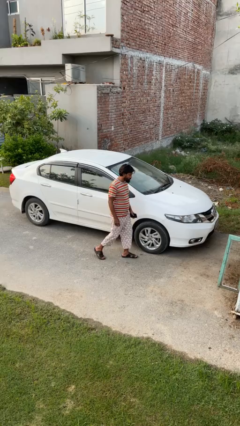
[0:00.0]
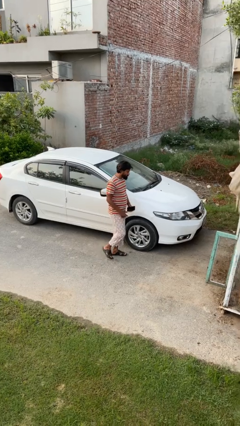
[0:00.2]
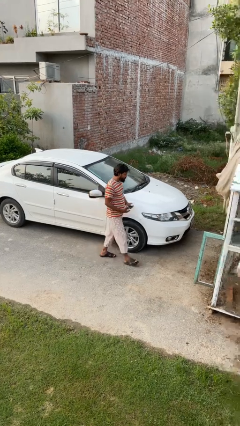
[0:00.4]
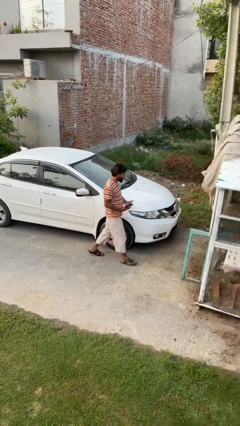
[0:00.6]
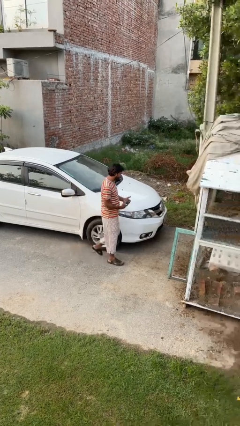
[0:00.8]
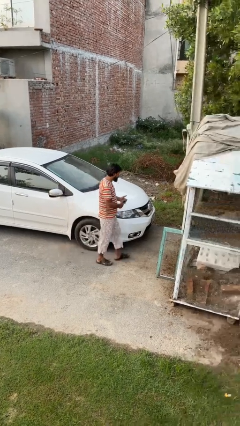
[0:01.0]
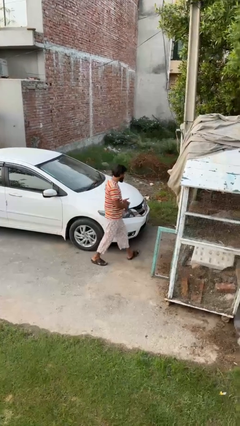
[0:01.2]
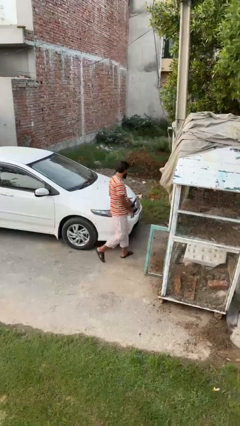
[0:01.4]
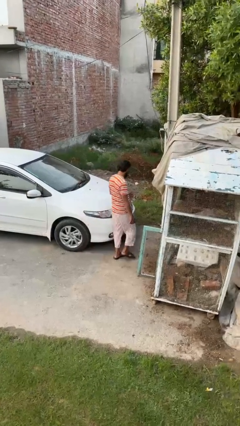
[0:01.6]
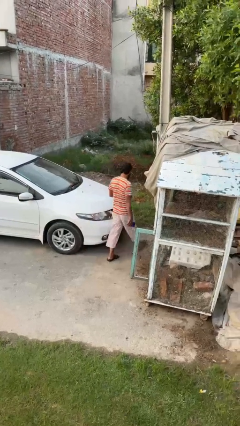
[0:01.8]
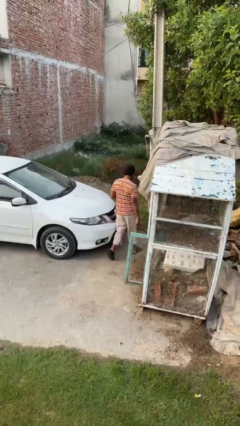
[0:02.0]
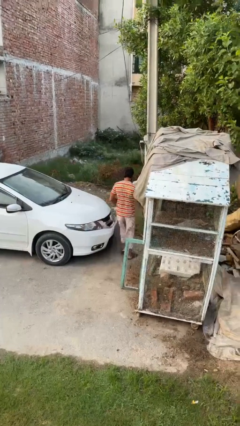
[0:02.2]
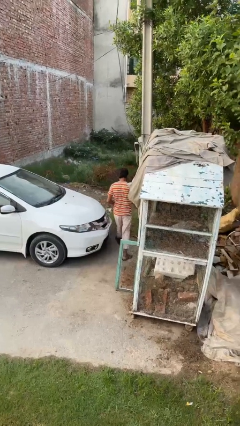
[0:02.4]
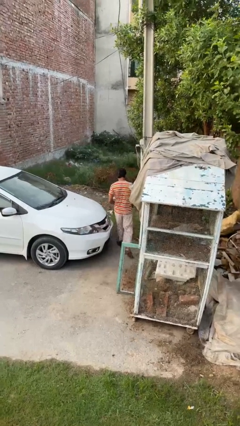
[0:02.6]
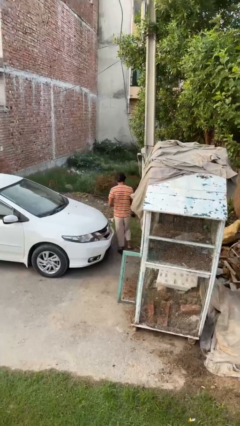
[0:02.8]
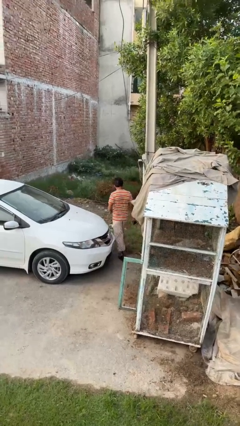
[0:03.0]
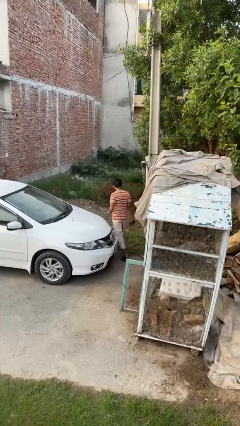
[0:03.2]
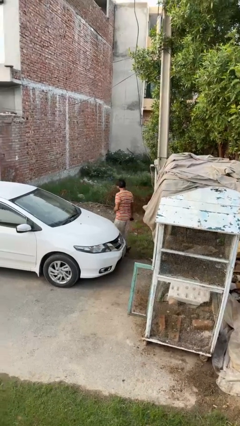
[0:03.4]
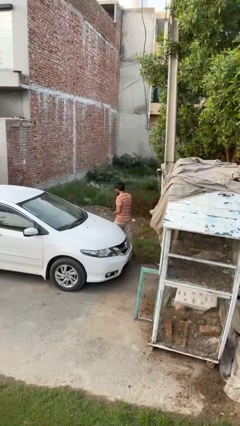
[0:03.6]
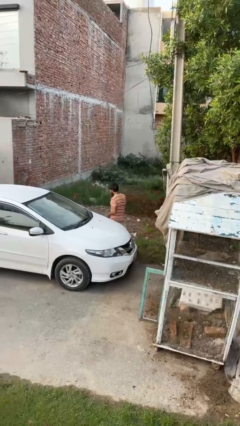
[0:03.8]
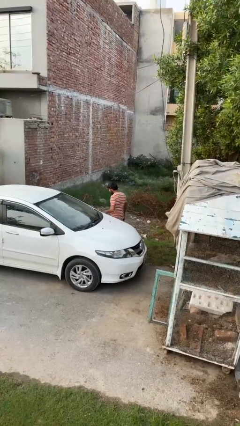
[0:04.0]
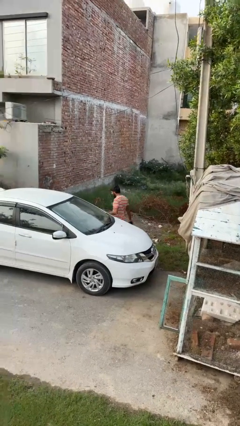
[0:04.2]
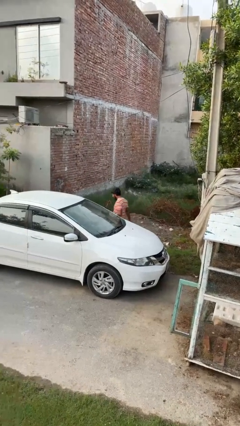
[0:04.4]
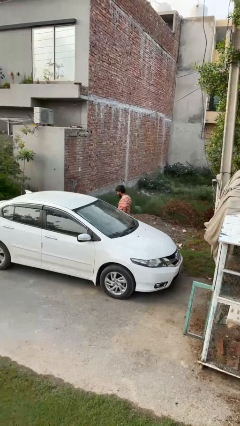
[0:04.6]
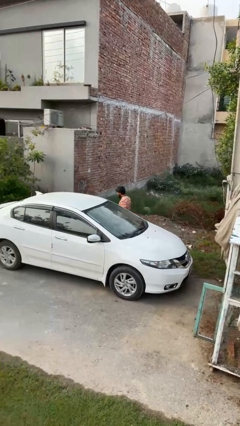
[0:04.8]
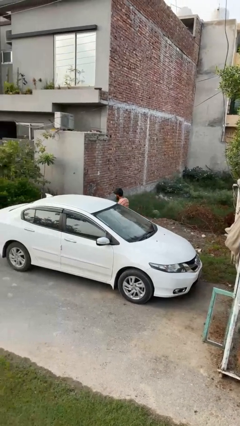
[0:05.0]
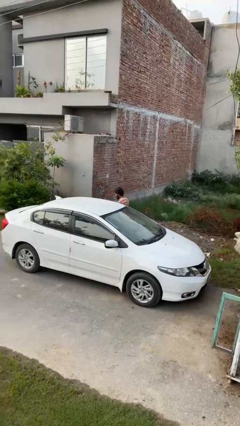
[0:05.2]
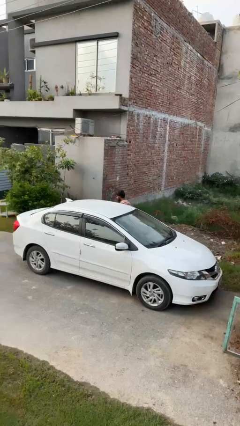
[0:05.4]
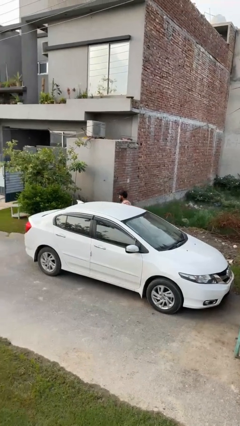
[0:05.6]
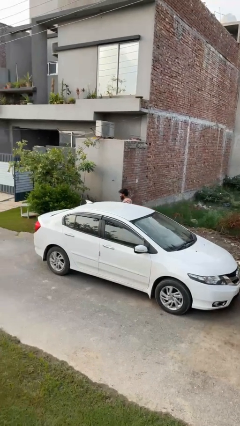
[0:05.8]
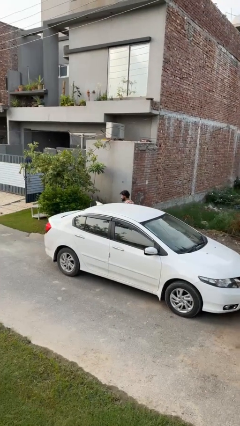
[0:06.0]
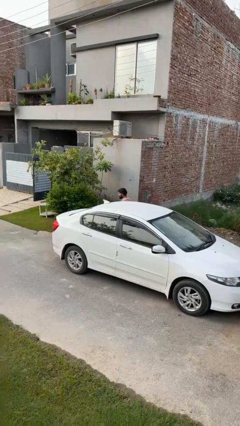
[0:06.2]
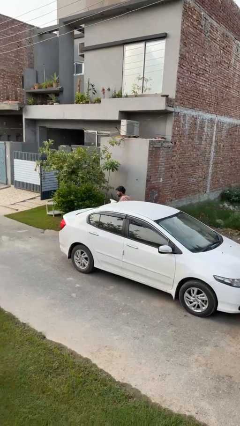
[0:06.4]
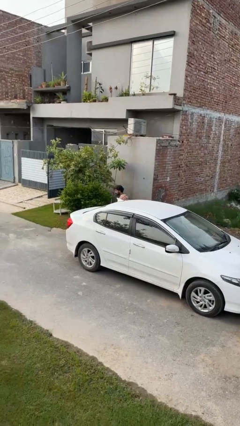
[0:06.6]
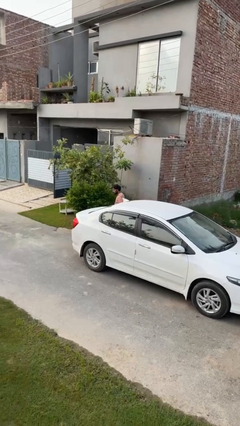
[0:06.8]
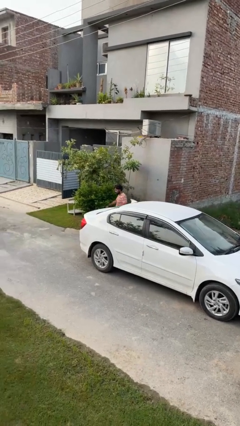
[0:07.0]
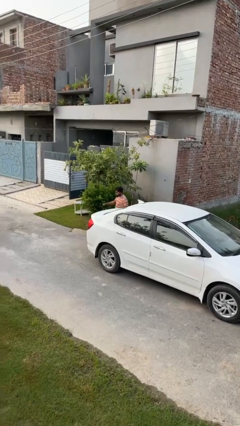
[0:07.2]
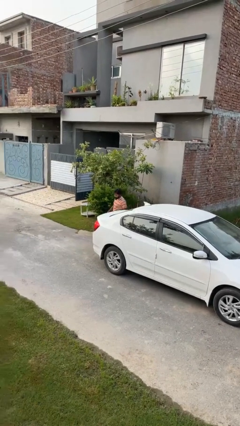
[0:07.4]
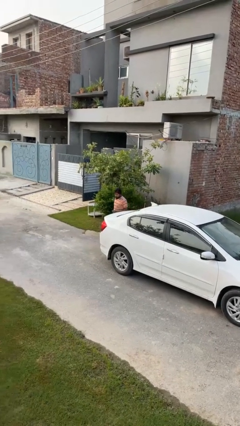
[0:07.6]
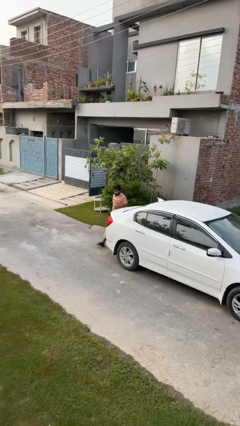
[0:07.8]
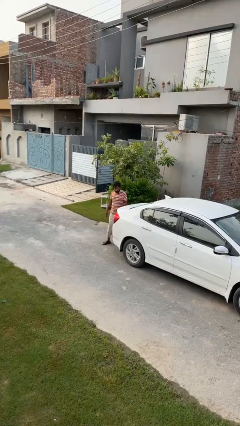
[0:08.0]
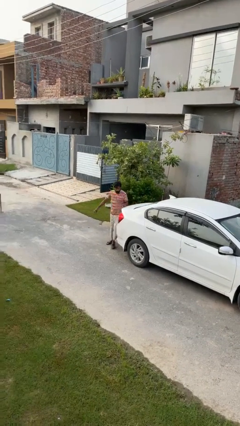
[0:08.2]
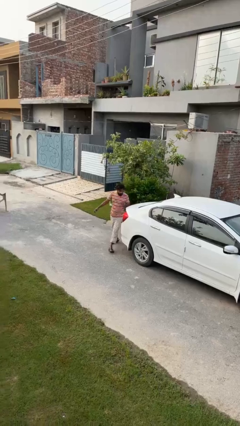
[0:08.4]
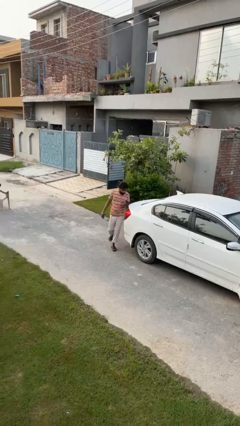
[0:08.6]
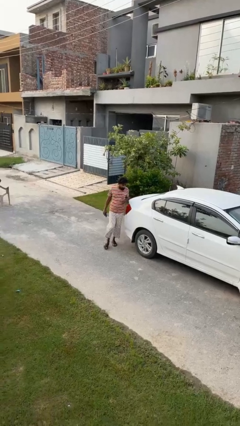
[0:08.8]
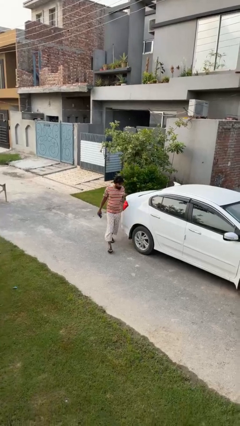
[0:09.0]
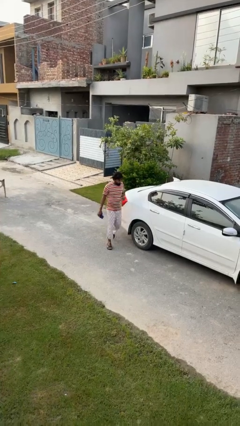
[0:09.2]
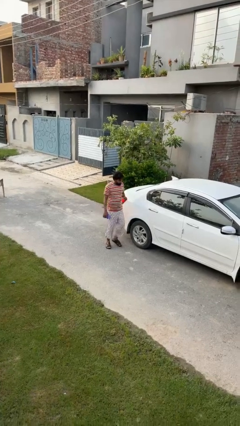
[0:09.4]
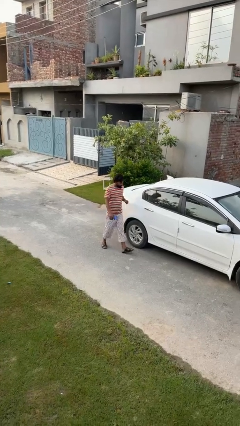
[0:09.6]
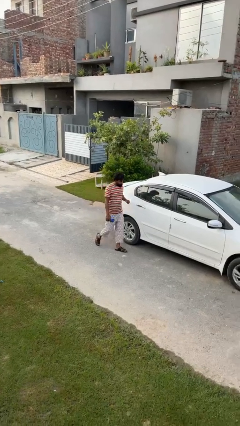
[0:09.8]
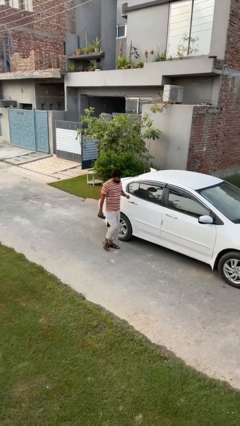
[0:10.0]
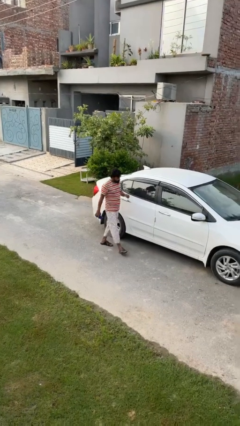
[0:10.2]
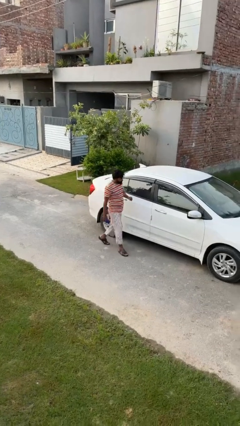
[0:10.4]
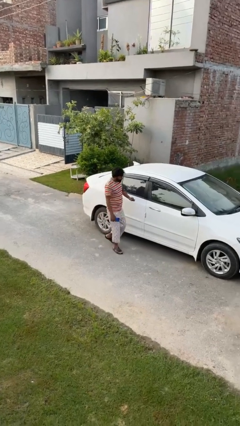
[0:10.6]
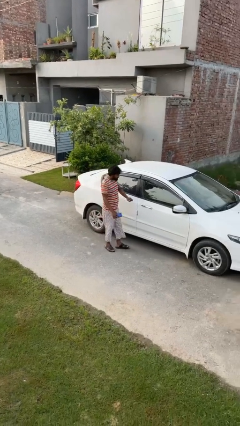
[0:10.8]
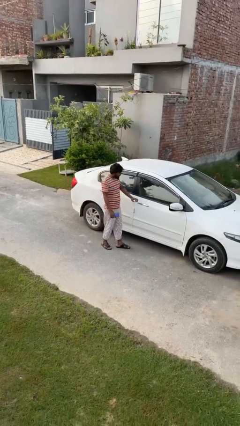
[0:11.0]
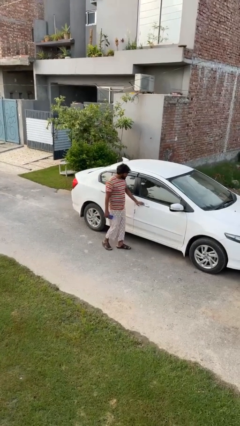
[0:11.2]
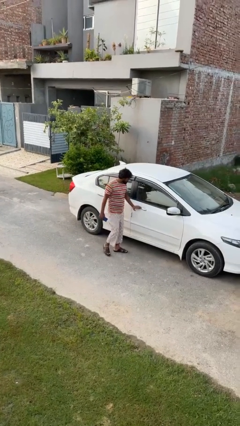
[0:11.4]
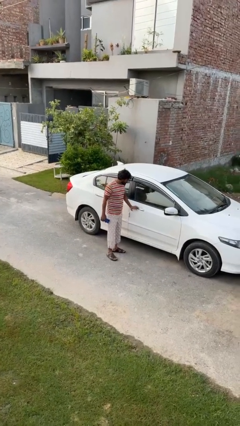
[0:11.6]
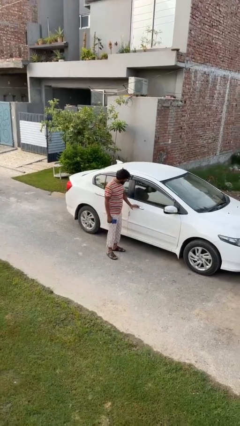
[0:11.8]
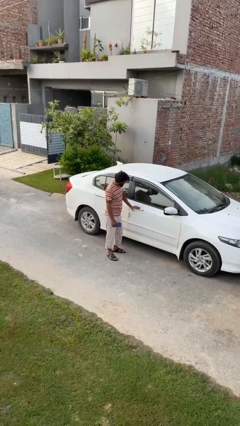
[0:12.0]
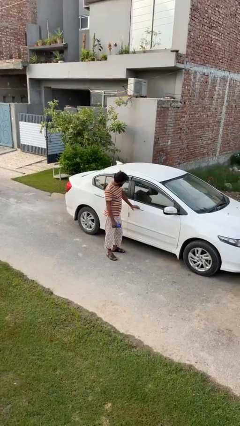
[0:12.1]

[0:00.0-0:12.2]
person walks around car

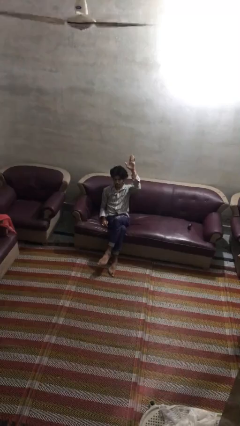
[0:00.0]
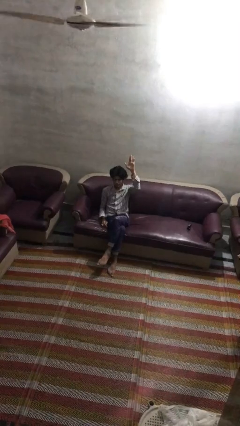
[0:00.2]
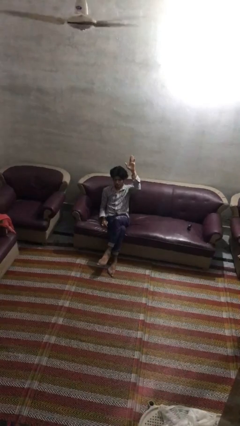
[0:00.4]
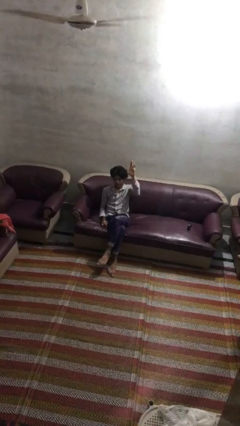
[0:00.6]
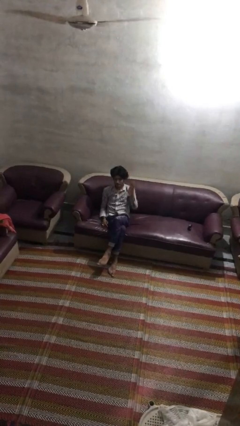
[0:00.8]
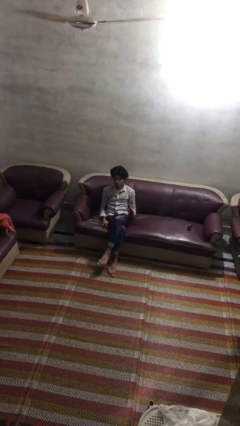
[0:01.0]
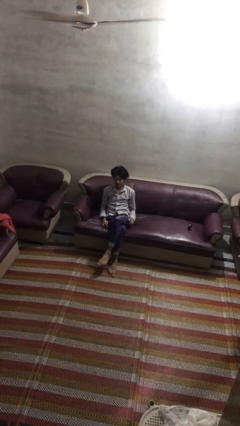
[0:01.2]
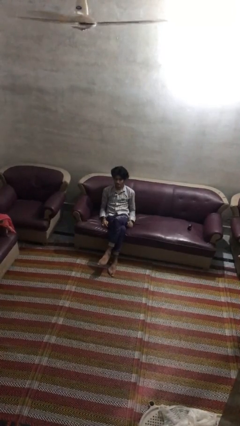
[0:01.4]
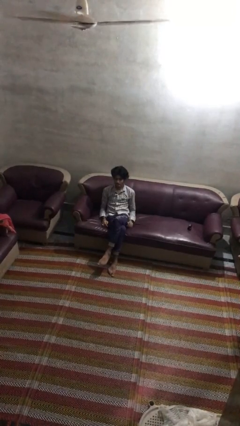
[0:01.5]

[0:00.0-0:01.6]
person gestures lower hand

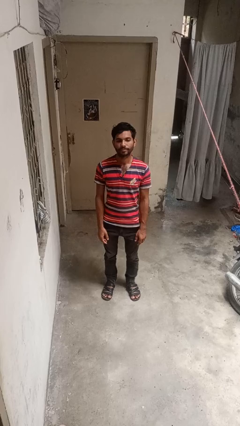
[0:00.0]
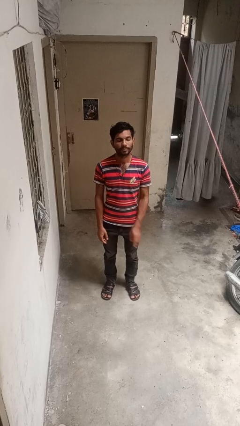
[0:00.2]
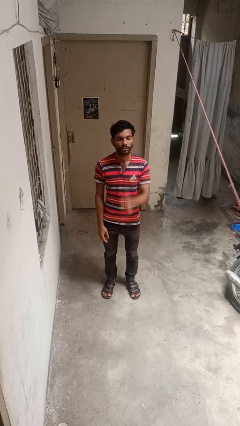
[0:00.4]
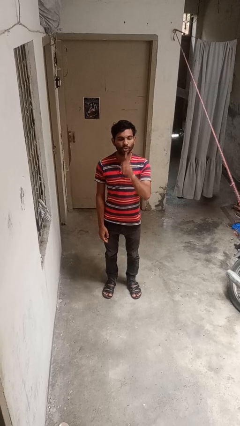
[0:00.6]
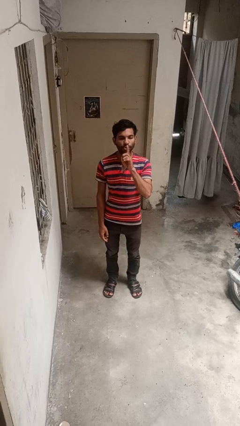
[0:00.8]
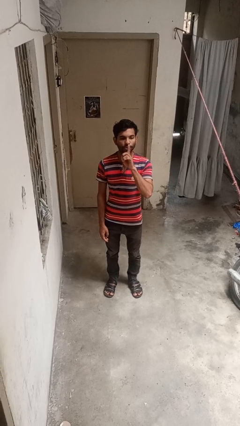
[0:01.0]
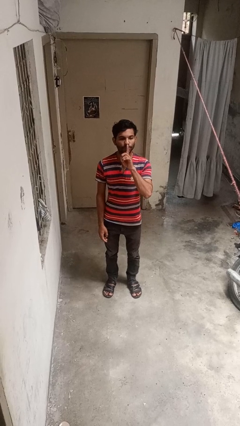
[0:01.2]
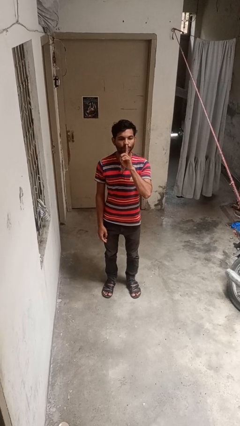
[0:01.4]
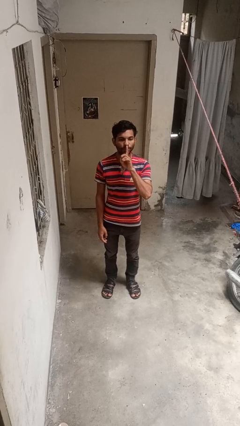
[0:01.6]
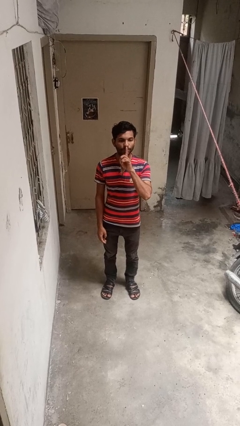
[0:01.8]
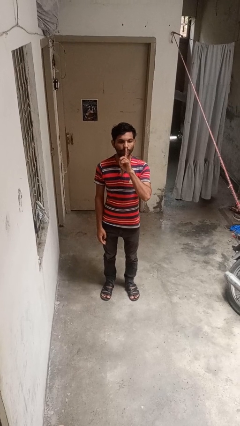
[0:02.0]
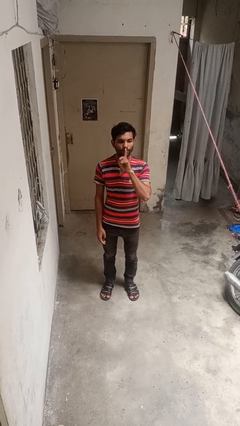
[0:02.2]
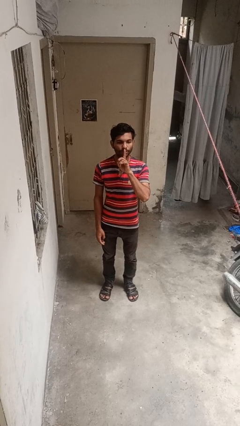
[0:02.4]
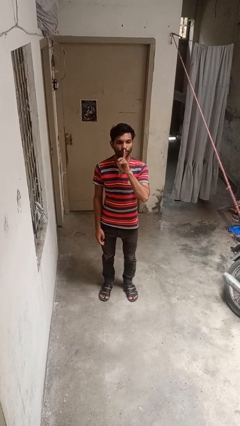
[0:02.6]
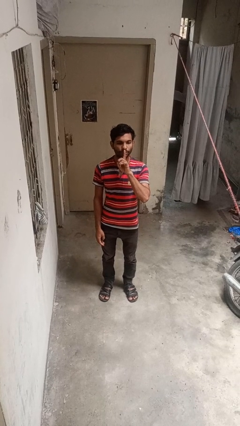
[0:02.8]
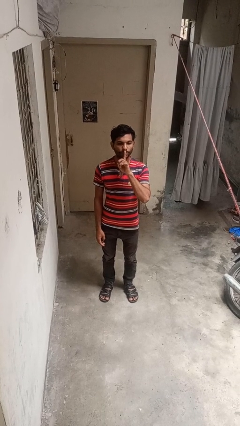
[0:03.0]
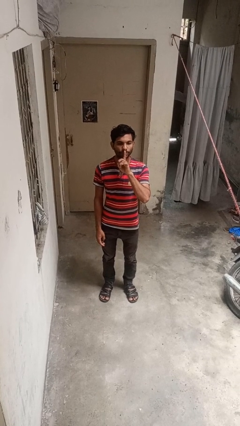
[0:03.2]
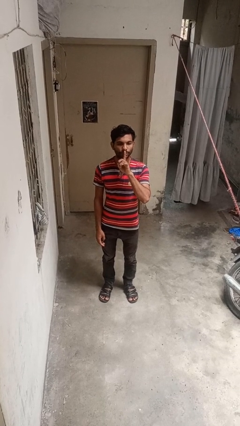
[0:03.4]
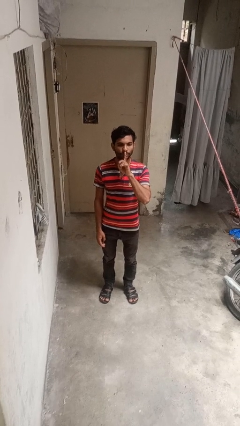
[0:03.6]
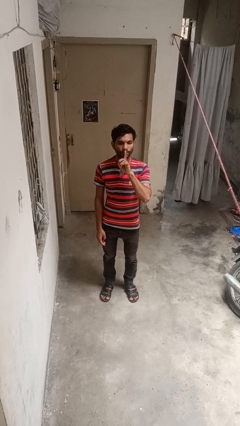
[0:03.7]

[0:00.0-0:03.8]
person gestures be quiet

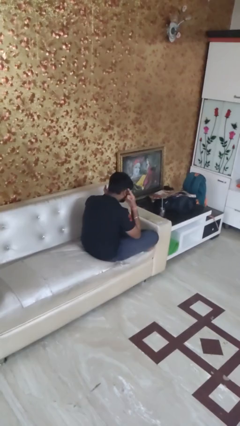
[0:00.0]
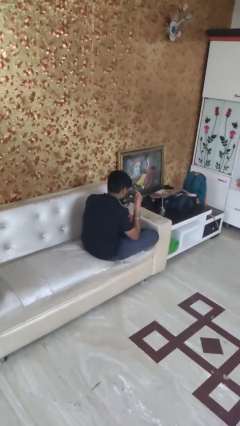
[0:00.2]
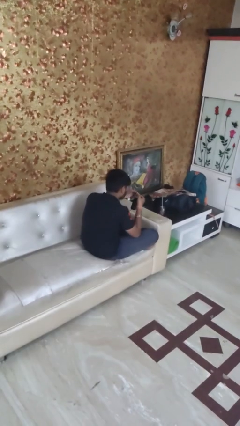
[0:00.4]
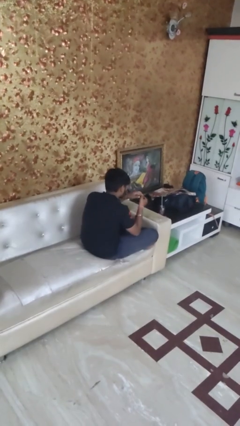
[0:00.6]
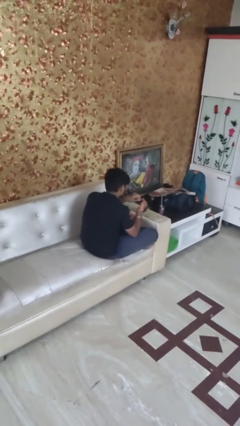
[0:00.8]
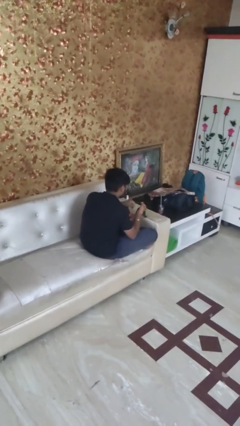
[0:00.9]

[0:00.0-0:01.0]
person takes off facemask
